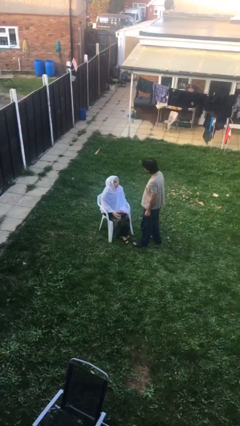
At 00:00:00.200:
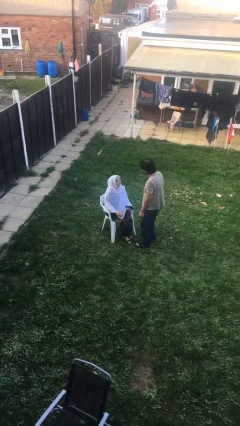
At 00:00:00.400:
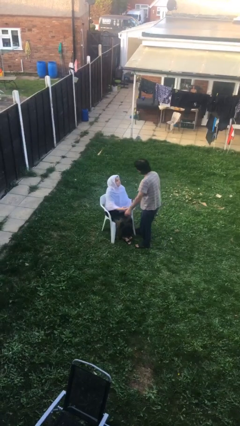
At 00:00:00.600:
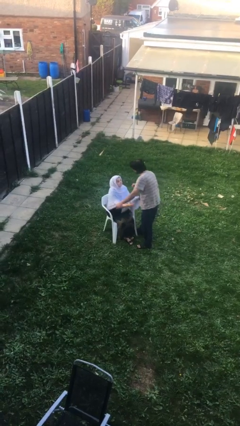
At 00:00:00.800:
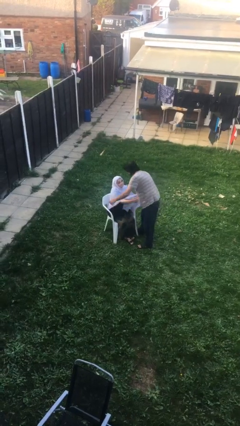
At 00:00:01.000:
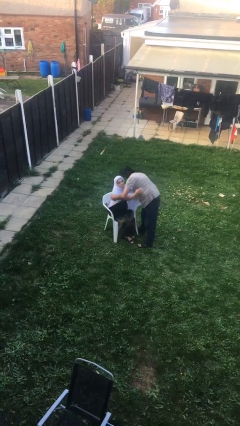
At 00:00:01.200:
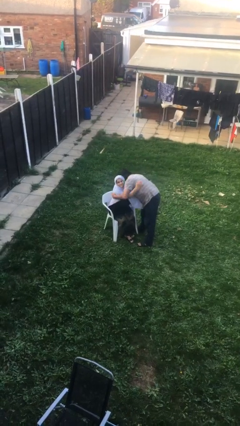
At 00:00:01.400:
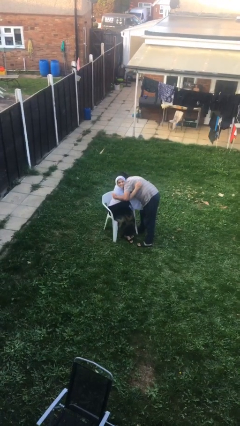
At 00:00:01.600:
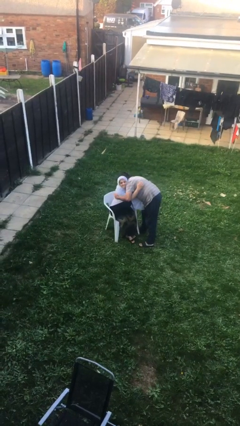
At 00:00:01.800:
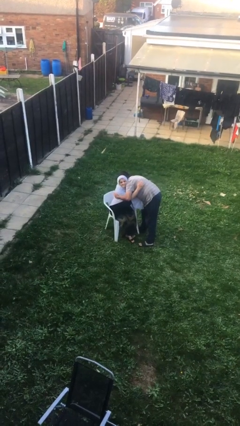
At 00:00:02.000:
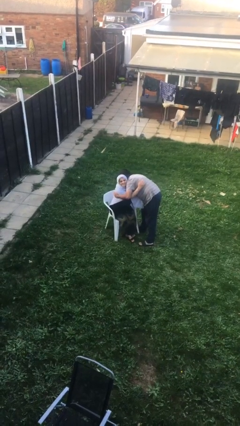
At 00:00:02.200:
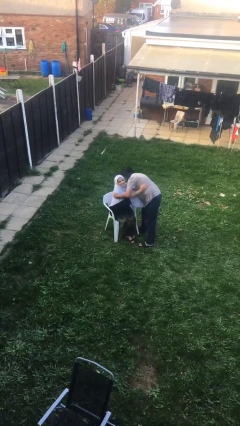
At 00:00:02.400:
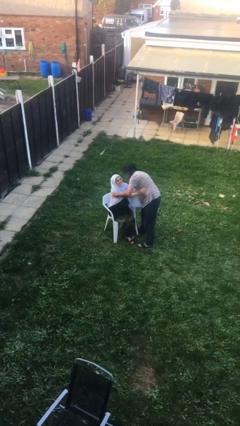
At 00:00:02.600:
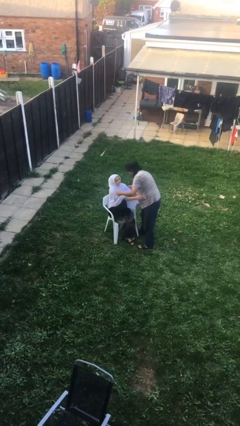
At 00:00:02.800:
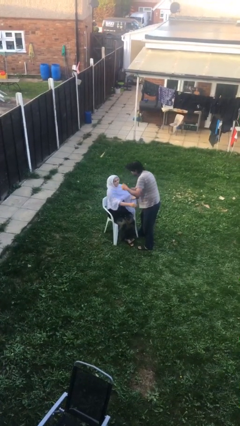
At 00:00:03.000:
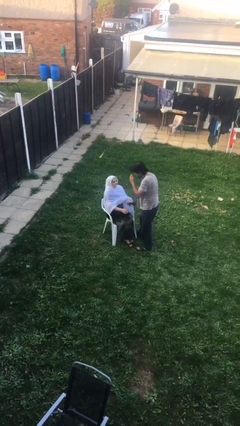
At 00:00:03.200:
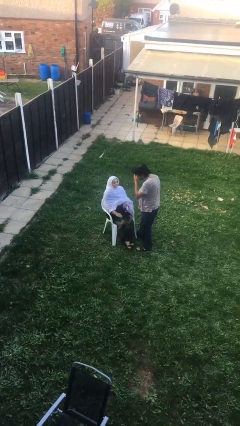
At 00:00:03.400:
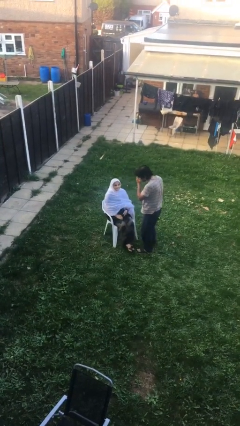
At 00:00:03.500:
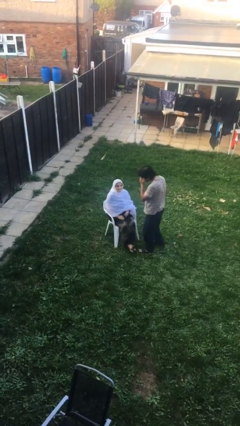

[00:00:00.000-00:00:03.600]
person embraces person

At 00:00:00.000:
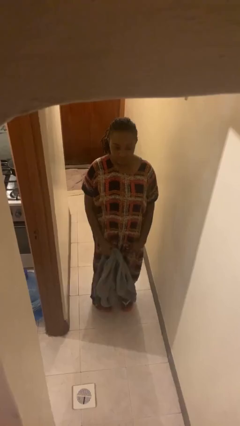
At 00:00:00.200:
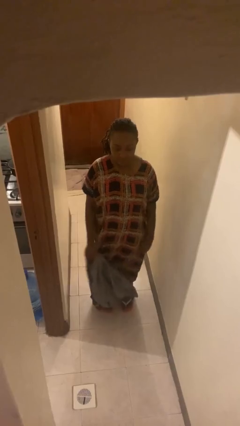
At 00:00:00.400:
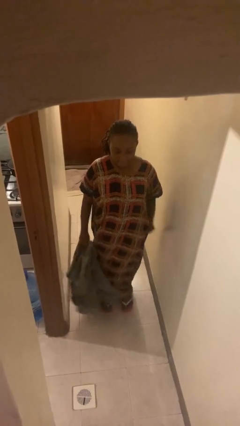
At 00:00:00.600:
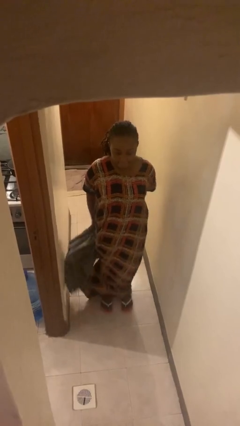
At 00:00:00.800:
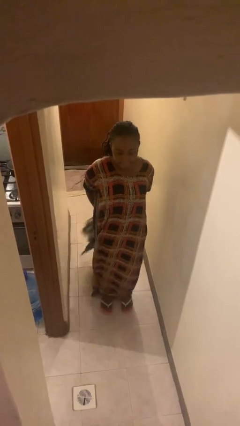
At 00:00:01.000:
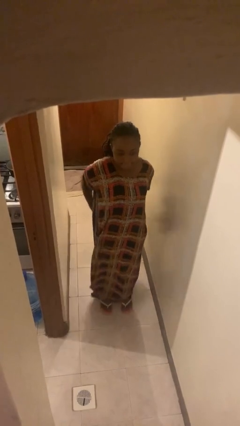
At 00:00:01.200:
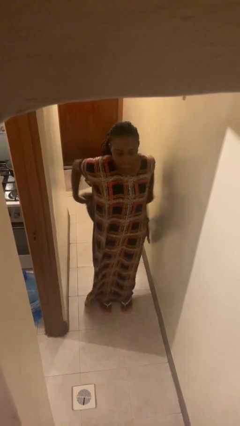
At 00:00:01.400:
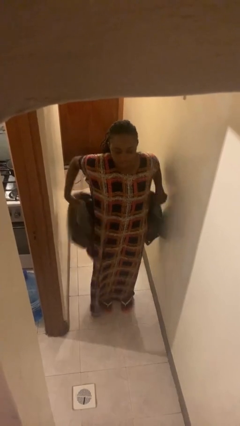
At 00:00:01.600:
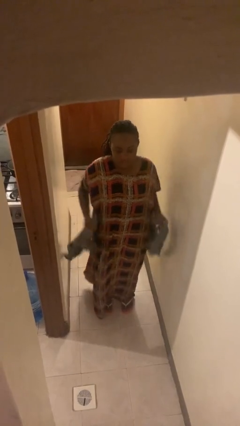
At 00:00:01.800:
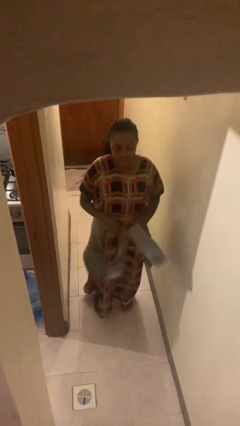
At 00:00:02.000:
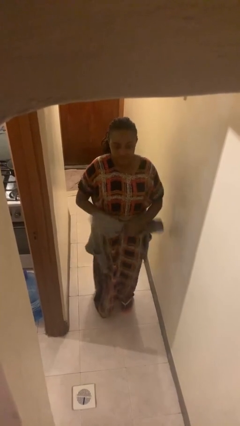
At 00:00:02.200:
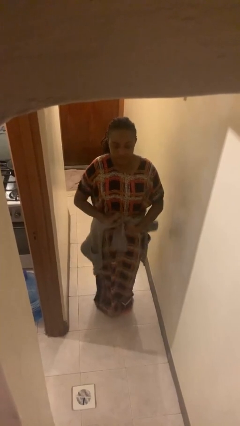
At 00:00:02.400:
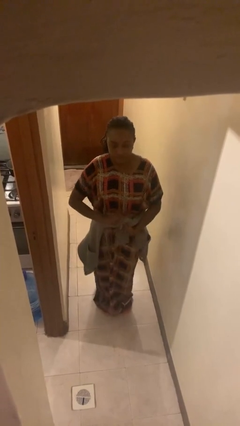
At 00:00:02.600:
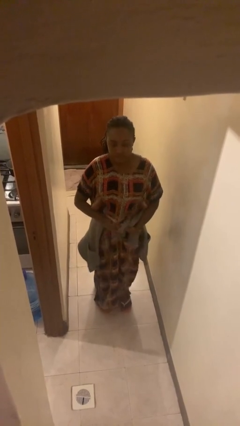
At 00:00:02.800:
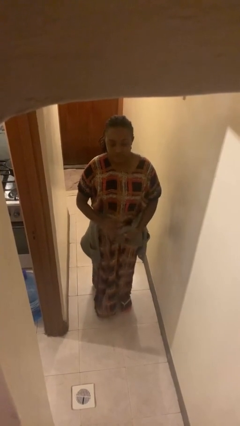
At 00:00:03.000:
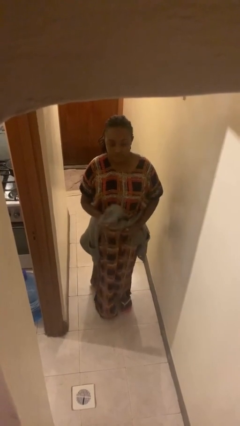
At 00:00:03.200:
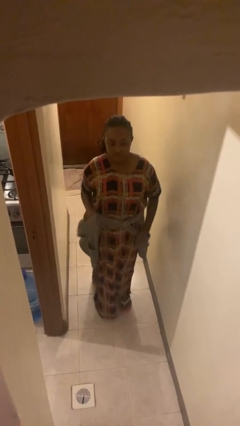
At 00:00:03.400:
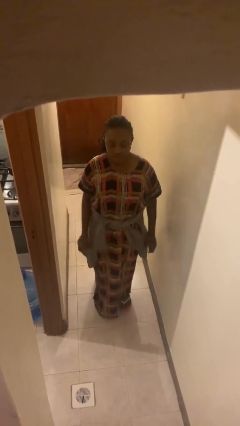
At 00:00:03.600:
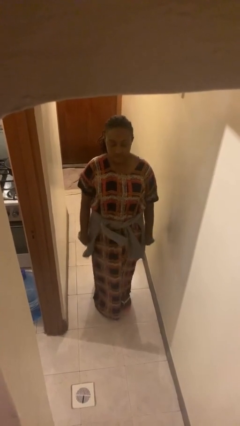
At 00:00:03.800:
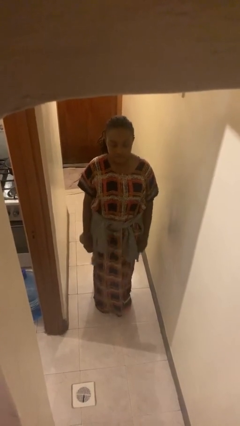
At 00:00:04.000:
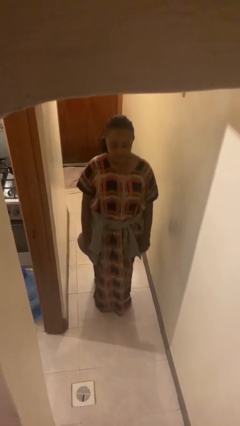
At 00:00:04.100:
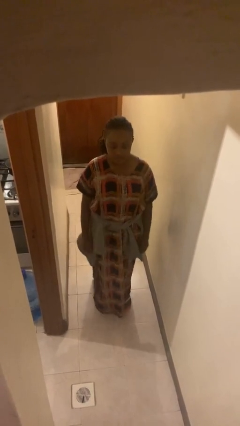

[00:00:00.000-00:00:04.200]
person ties jacket around waist

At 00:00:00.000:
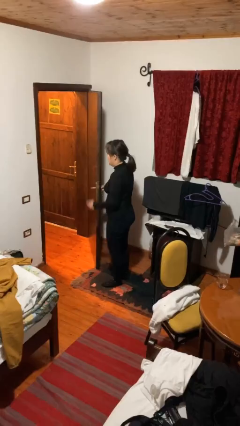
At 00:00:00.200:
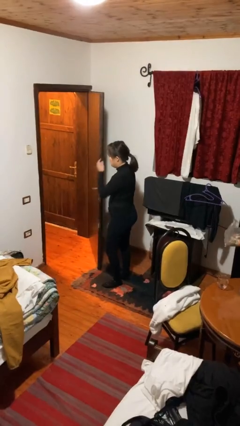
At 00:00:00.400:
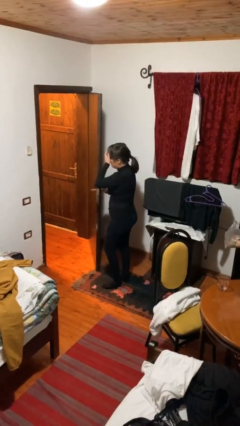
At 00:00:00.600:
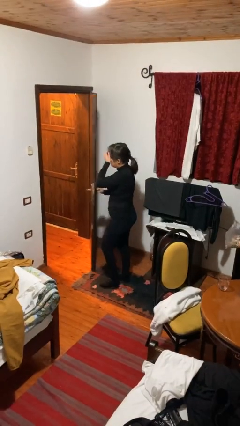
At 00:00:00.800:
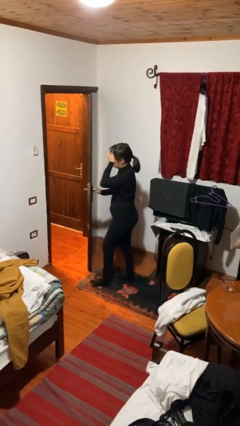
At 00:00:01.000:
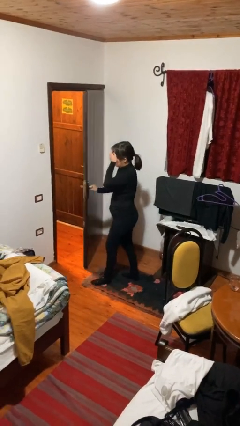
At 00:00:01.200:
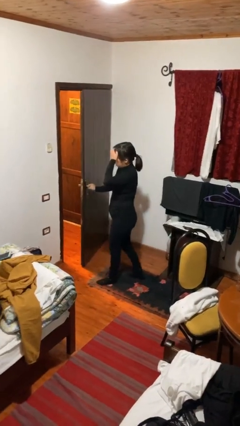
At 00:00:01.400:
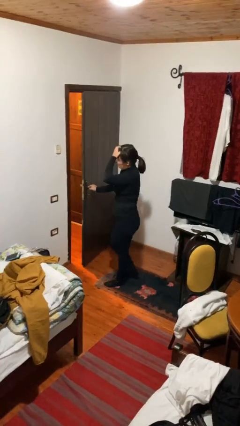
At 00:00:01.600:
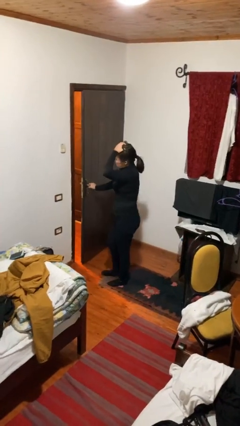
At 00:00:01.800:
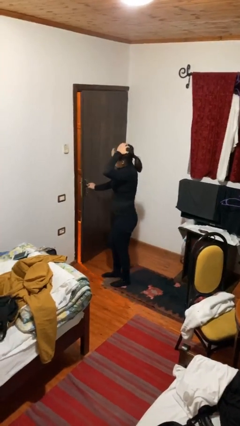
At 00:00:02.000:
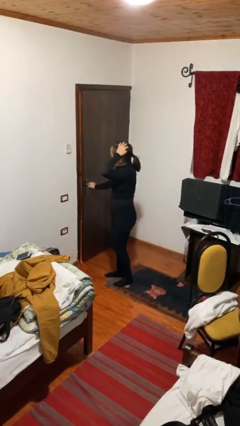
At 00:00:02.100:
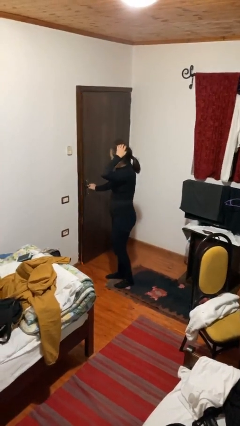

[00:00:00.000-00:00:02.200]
person closes facility door

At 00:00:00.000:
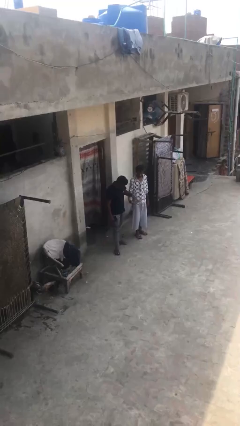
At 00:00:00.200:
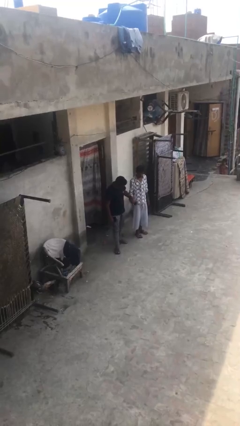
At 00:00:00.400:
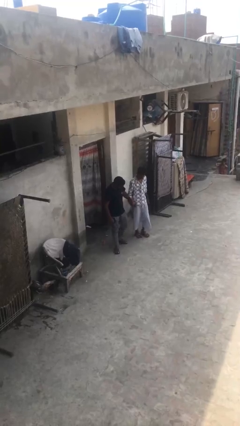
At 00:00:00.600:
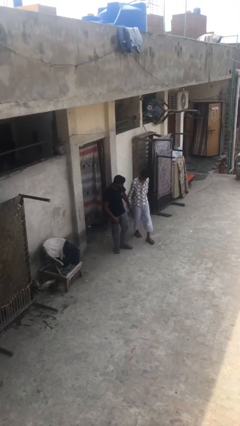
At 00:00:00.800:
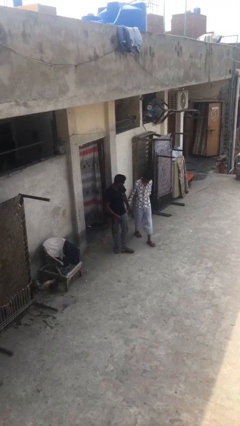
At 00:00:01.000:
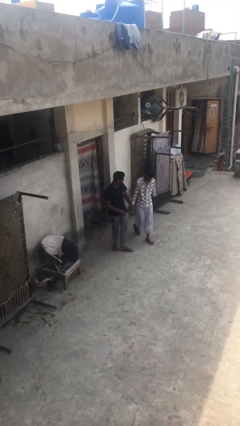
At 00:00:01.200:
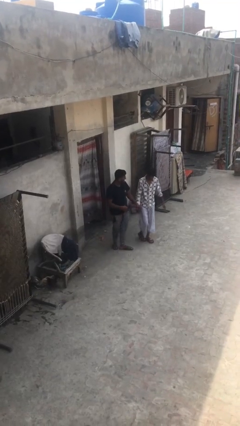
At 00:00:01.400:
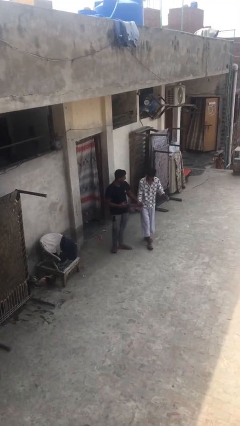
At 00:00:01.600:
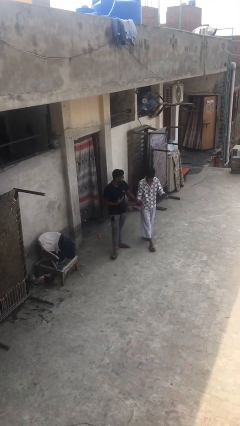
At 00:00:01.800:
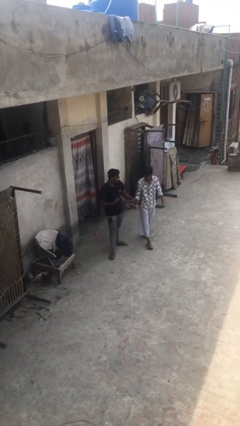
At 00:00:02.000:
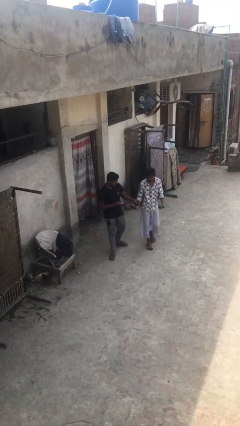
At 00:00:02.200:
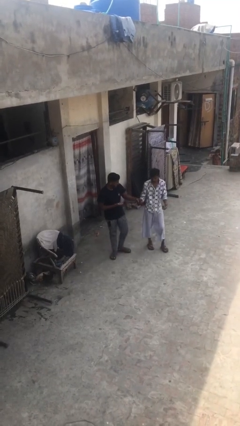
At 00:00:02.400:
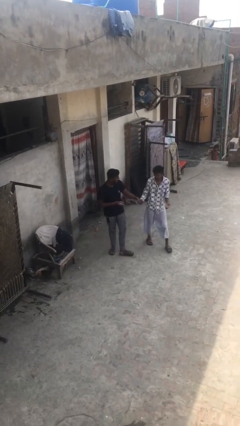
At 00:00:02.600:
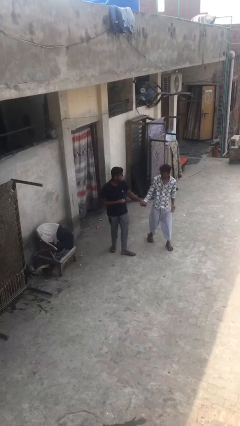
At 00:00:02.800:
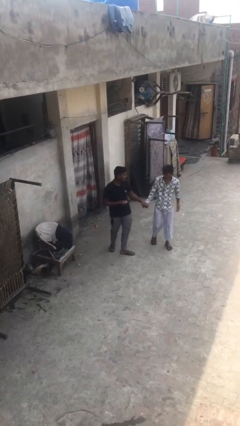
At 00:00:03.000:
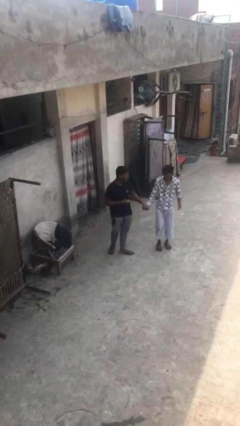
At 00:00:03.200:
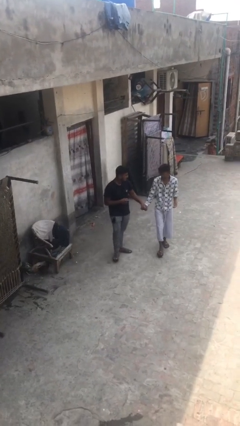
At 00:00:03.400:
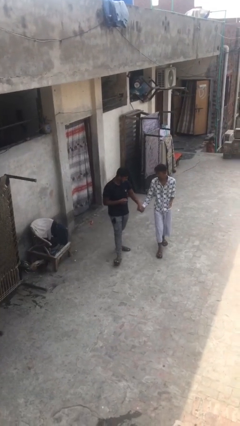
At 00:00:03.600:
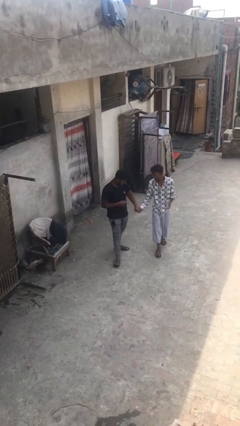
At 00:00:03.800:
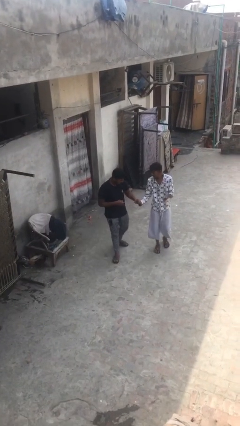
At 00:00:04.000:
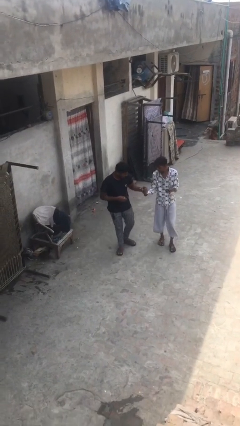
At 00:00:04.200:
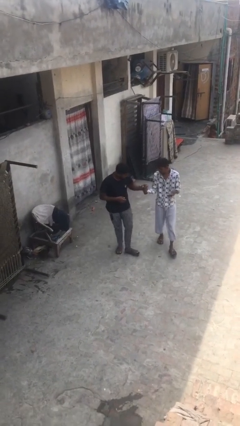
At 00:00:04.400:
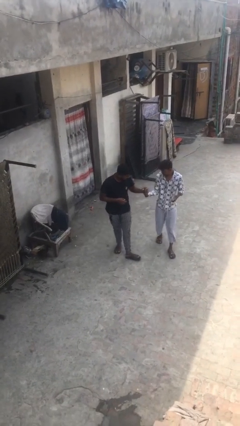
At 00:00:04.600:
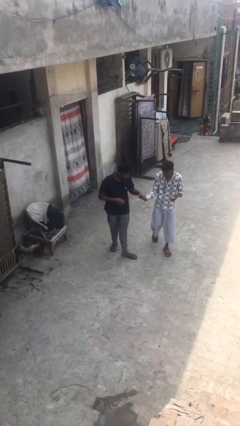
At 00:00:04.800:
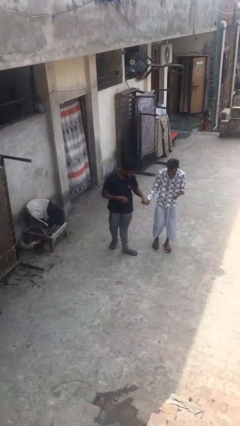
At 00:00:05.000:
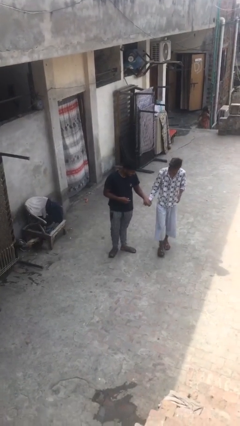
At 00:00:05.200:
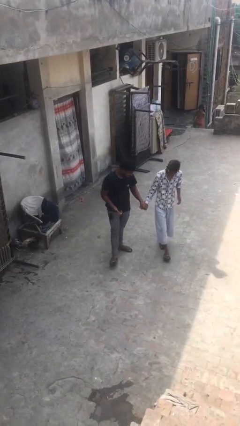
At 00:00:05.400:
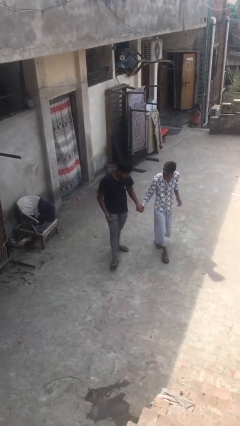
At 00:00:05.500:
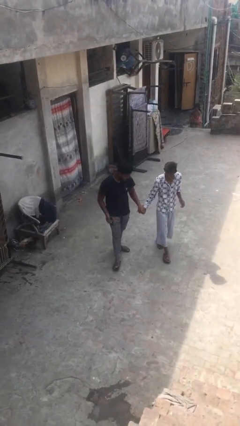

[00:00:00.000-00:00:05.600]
person holds hand

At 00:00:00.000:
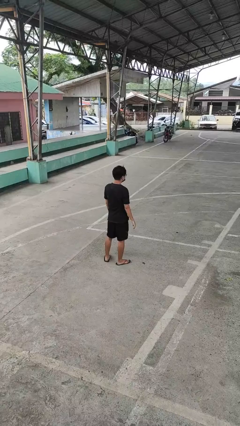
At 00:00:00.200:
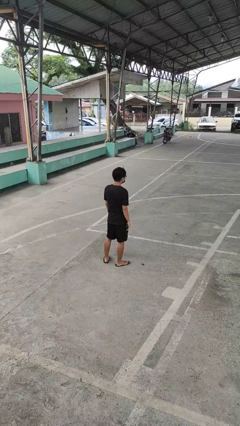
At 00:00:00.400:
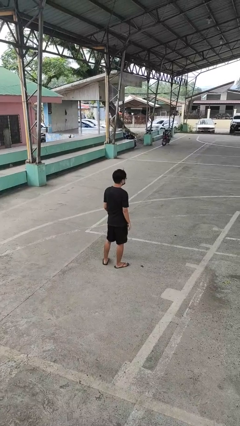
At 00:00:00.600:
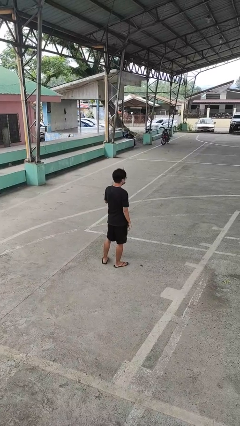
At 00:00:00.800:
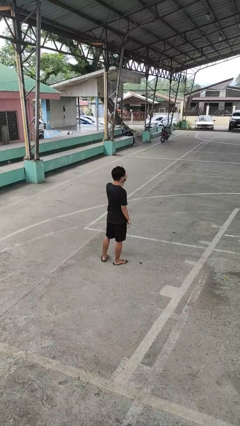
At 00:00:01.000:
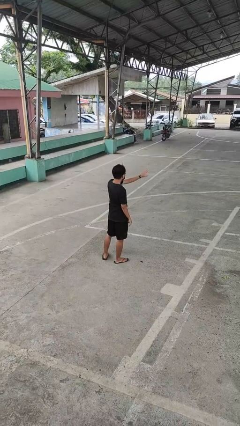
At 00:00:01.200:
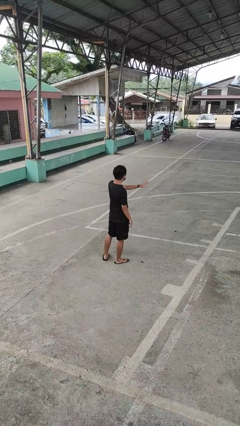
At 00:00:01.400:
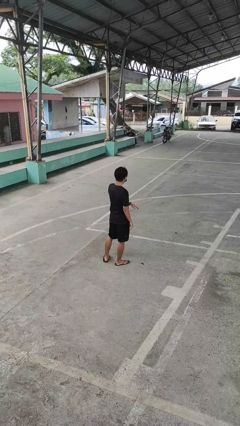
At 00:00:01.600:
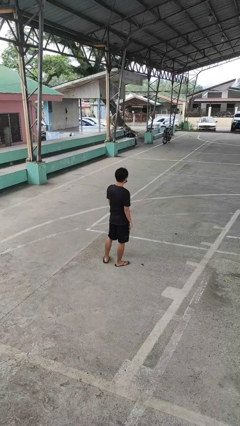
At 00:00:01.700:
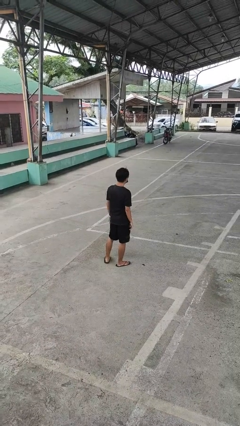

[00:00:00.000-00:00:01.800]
person gestures swipe right
